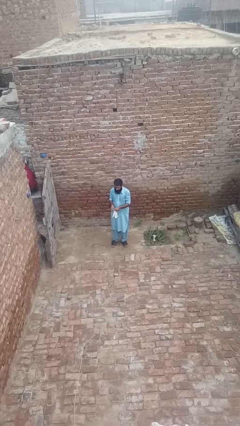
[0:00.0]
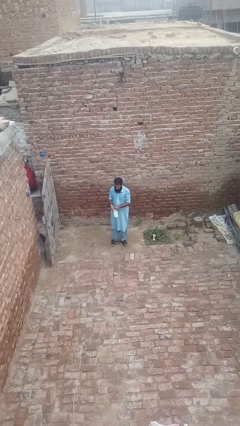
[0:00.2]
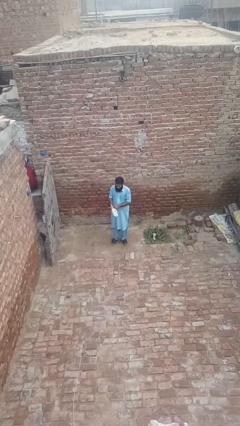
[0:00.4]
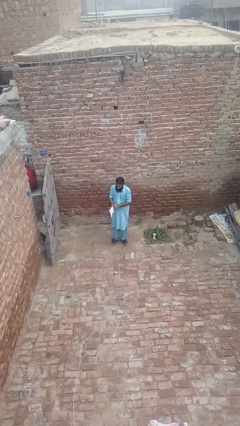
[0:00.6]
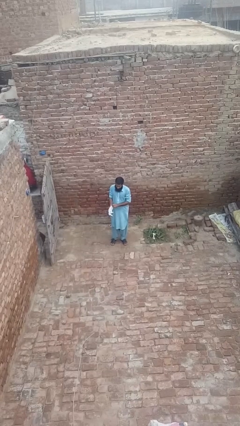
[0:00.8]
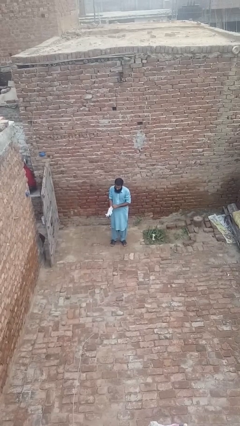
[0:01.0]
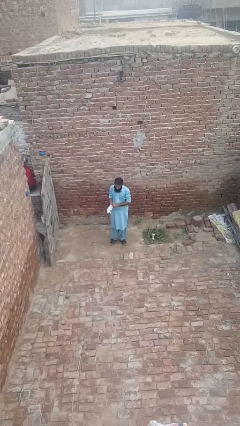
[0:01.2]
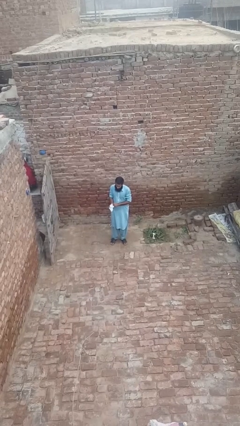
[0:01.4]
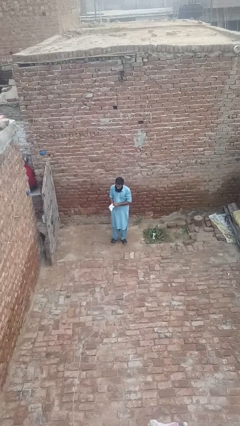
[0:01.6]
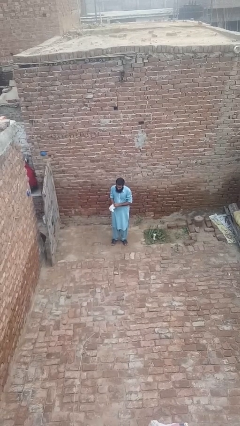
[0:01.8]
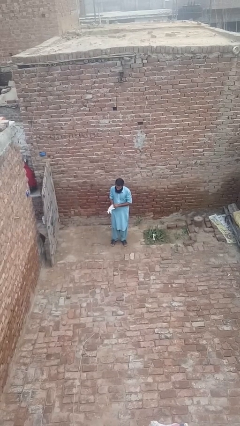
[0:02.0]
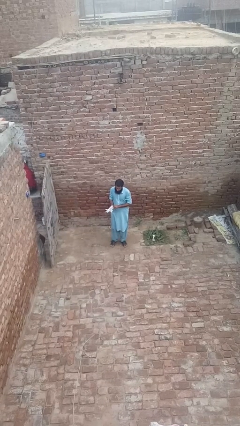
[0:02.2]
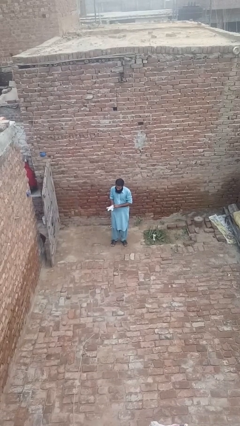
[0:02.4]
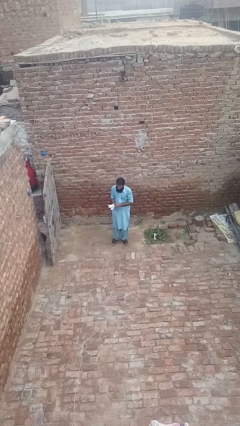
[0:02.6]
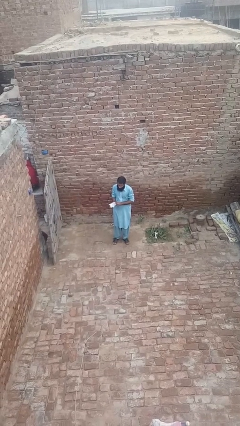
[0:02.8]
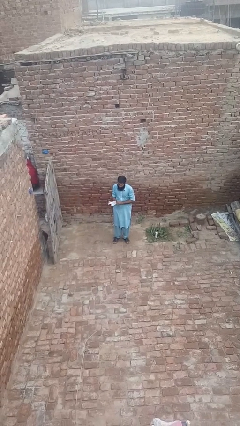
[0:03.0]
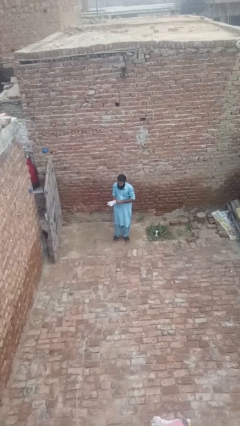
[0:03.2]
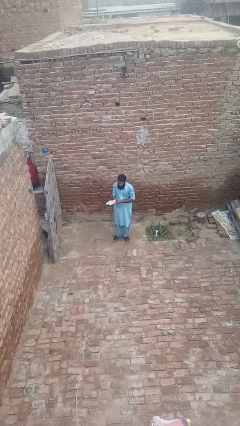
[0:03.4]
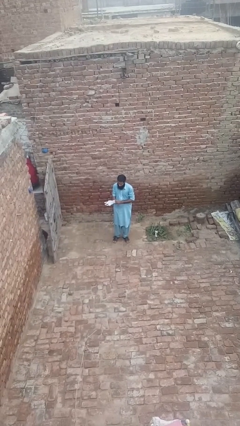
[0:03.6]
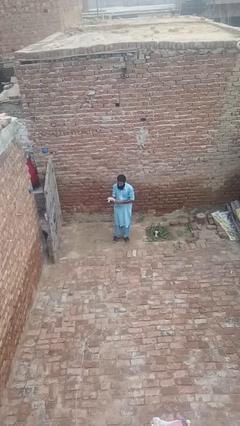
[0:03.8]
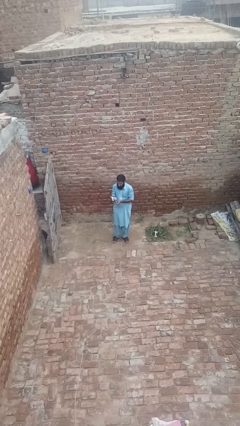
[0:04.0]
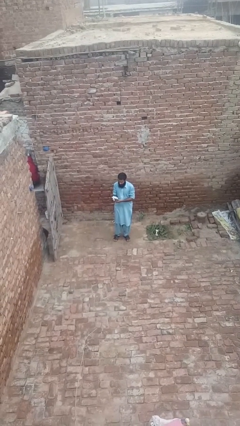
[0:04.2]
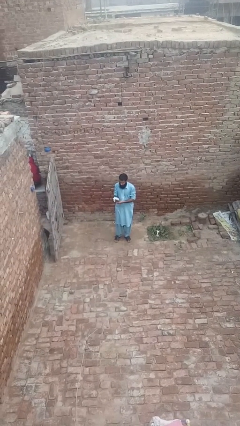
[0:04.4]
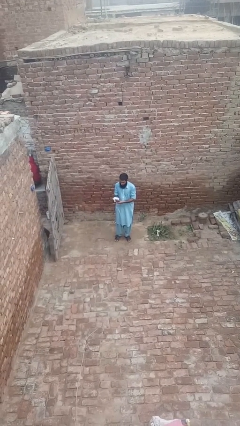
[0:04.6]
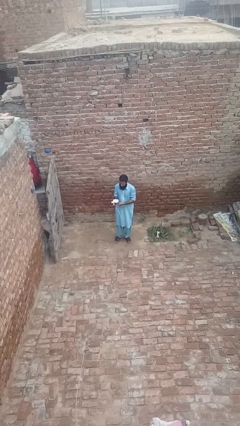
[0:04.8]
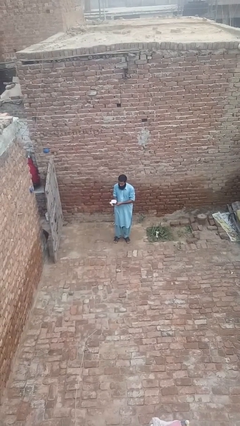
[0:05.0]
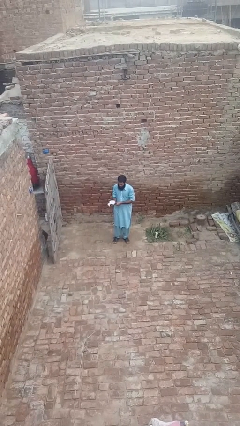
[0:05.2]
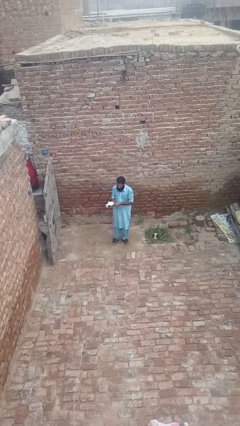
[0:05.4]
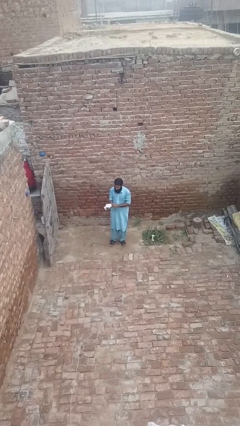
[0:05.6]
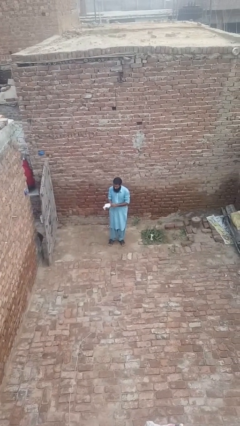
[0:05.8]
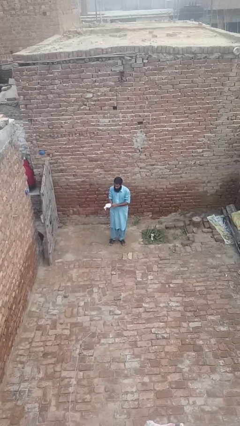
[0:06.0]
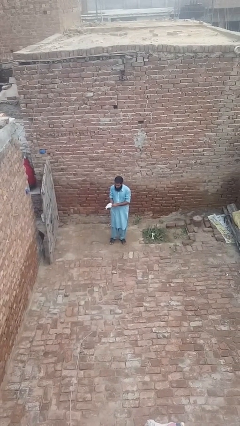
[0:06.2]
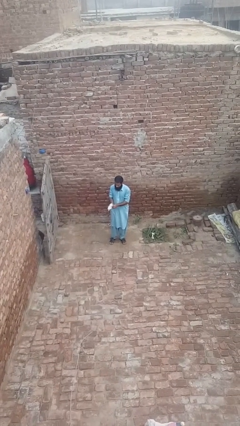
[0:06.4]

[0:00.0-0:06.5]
person puts on gloves

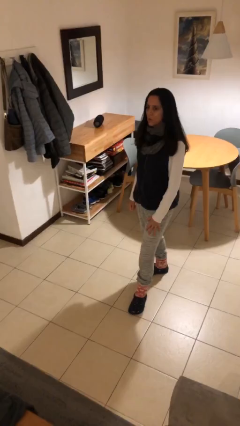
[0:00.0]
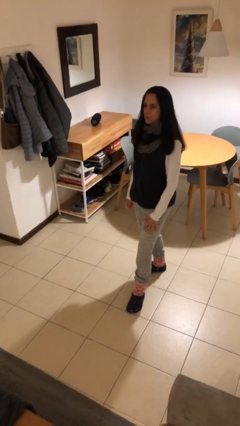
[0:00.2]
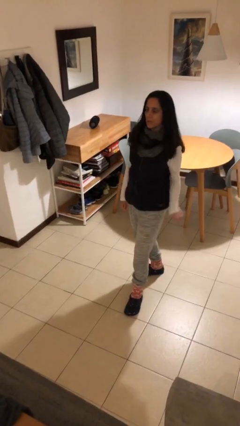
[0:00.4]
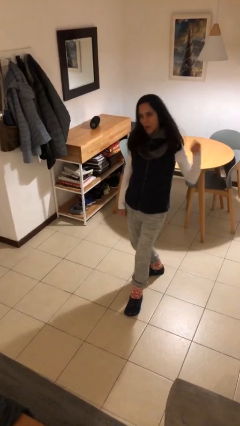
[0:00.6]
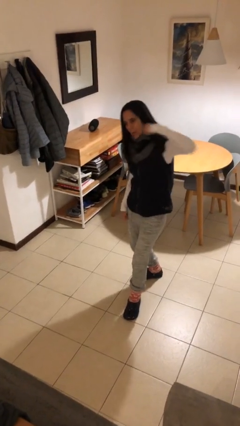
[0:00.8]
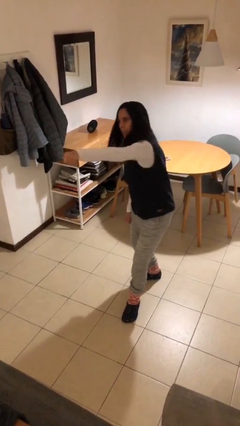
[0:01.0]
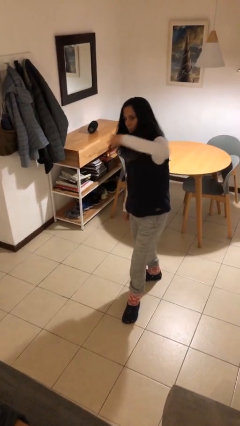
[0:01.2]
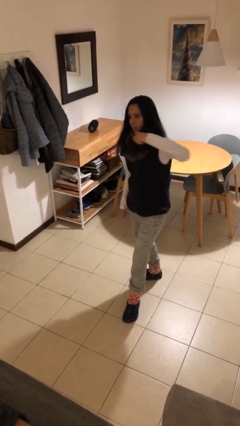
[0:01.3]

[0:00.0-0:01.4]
person punches

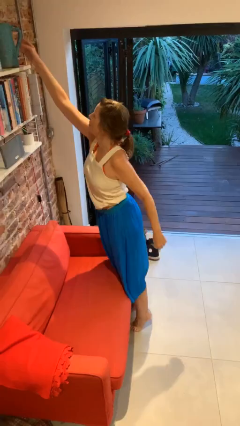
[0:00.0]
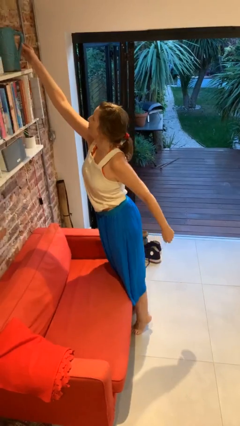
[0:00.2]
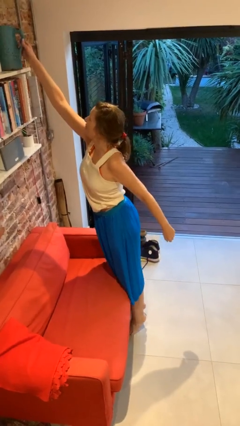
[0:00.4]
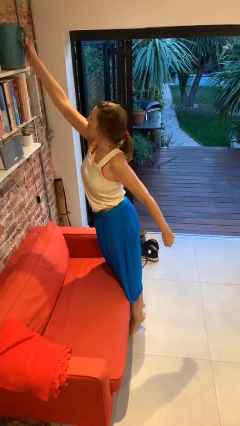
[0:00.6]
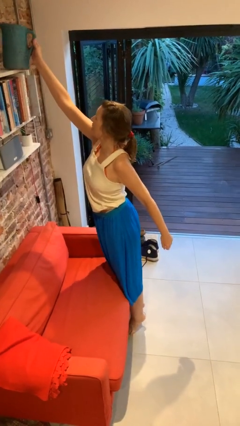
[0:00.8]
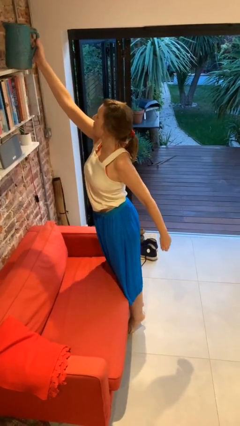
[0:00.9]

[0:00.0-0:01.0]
person picks up object from shelf

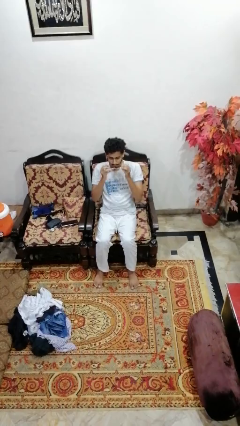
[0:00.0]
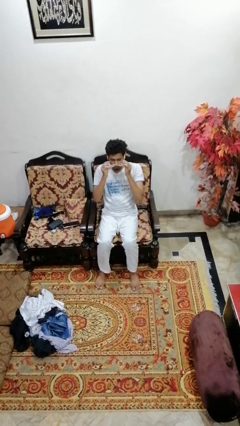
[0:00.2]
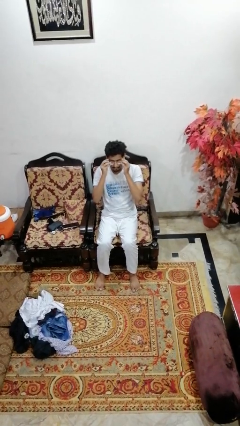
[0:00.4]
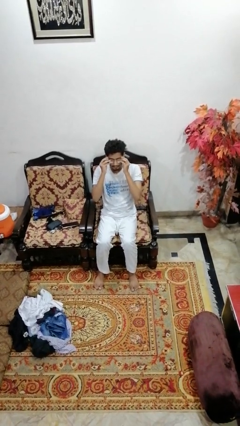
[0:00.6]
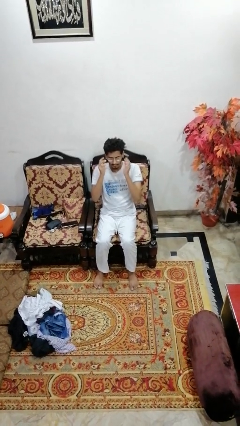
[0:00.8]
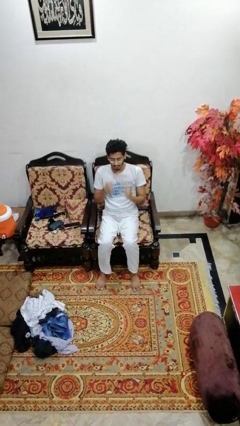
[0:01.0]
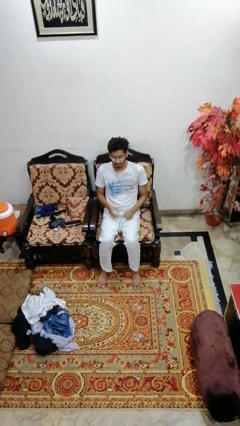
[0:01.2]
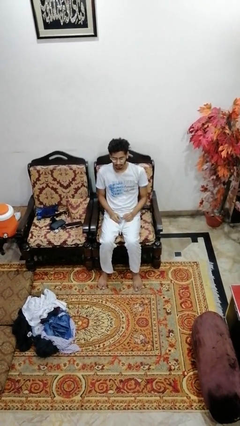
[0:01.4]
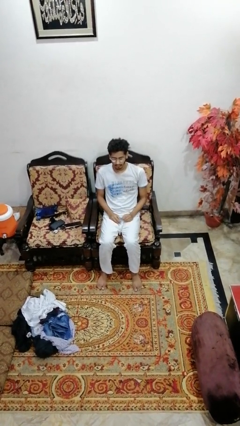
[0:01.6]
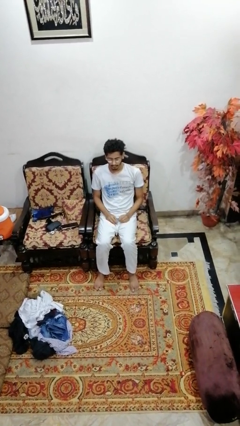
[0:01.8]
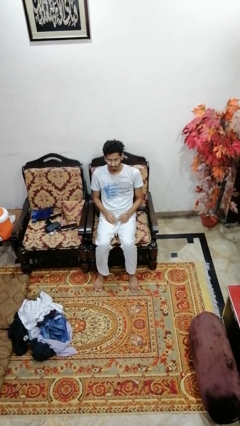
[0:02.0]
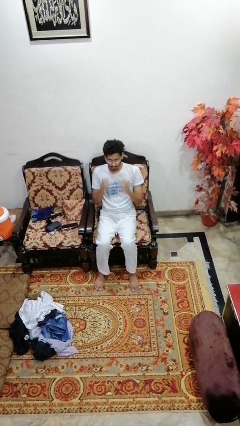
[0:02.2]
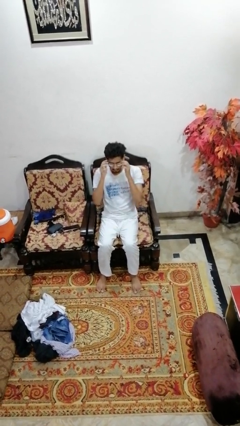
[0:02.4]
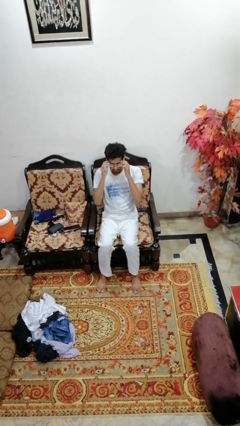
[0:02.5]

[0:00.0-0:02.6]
person puts on glasses

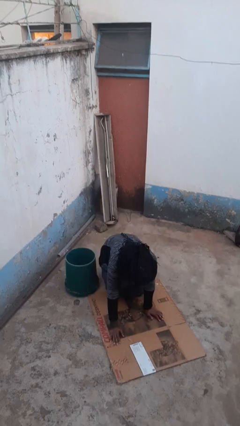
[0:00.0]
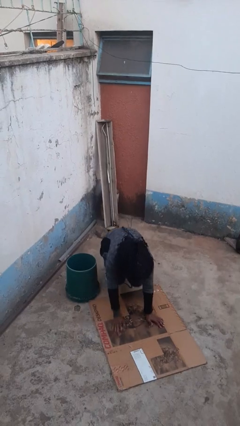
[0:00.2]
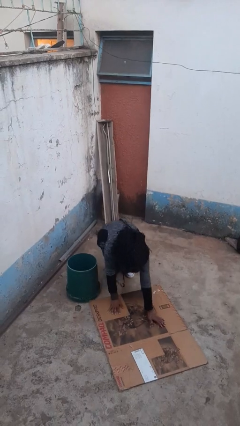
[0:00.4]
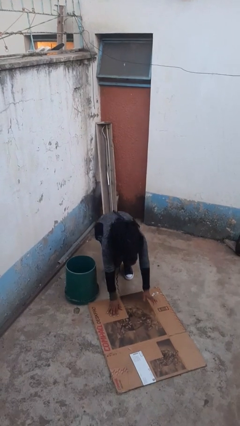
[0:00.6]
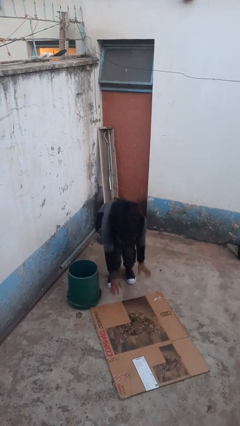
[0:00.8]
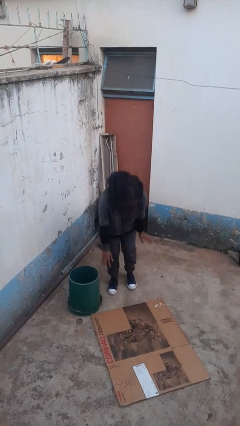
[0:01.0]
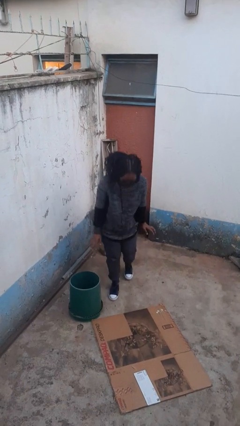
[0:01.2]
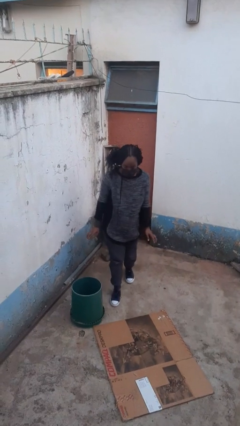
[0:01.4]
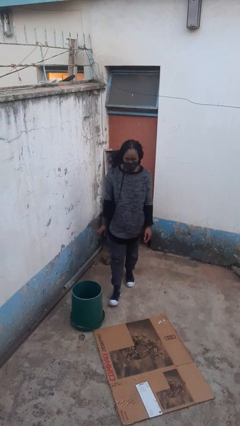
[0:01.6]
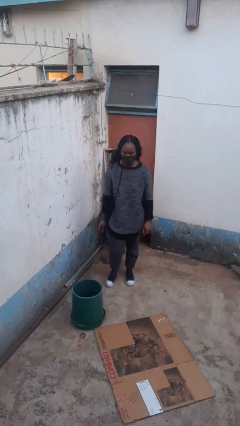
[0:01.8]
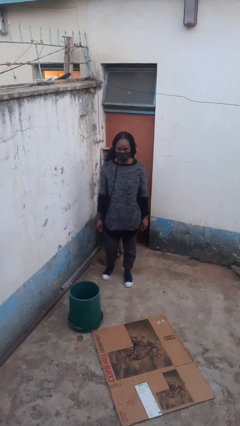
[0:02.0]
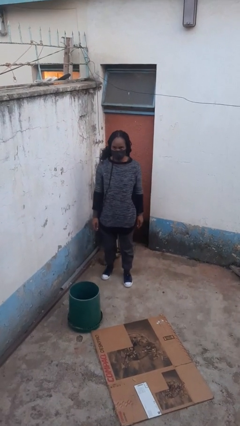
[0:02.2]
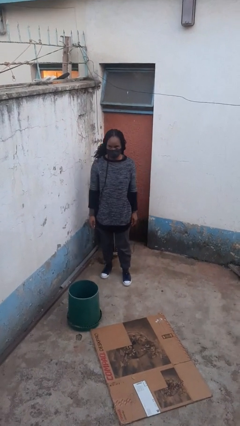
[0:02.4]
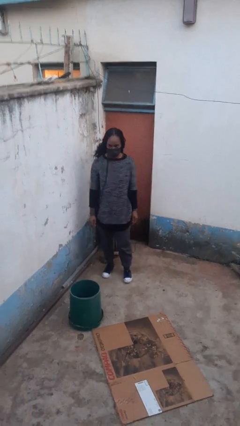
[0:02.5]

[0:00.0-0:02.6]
person stands up from floor

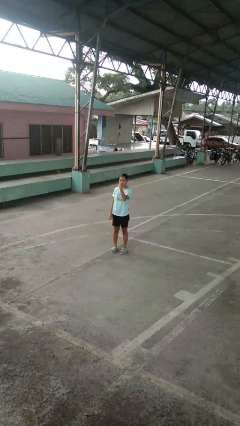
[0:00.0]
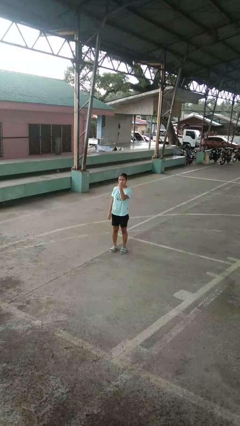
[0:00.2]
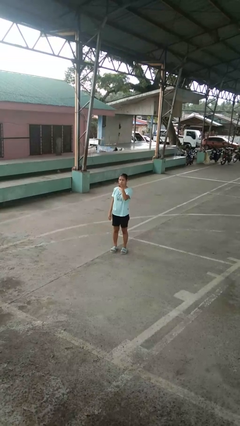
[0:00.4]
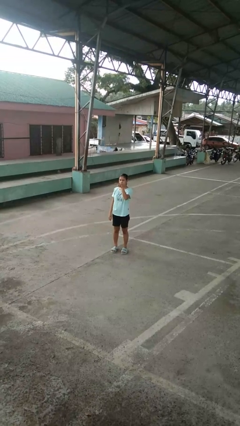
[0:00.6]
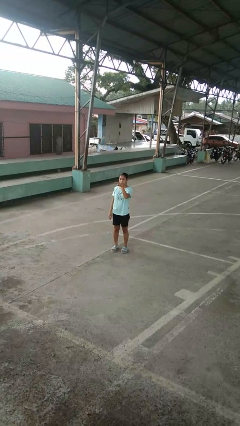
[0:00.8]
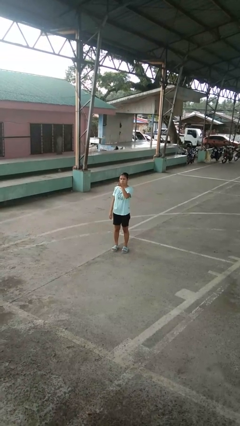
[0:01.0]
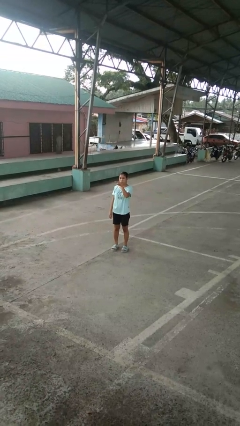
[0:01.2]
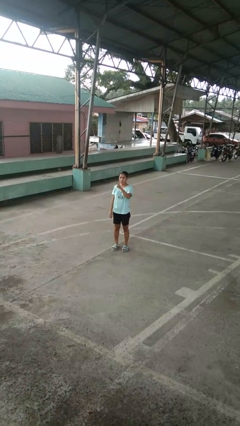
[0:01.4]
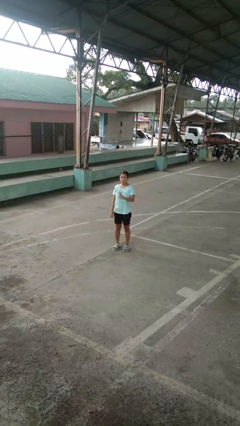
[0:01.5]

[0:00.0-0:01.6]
person gestures watch closely

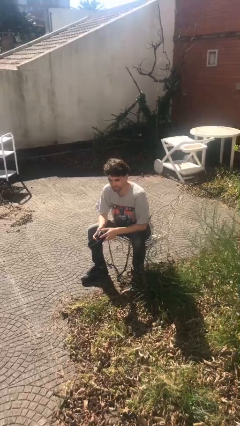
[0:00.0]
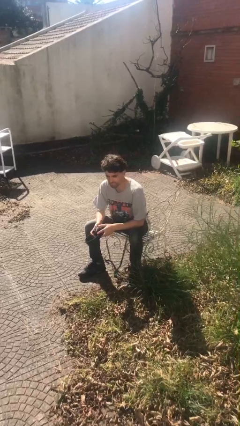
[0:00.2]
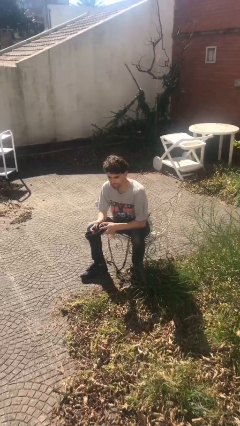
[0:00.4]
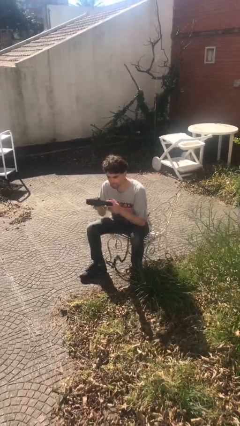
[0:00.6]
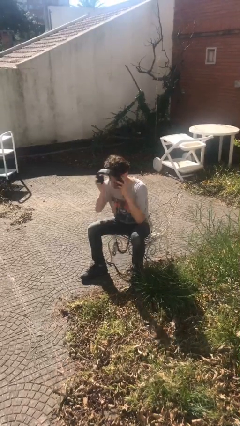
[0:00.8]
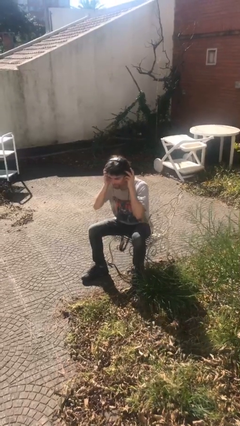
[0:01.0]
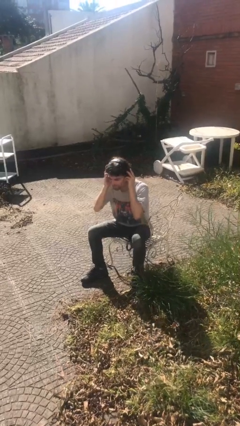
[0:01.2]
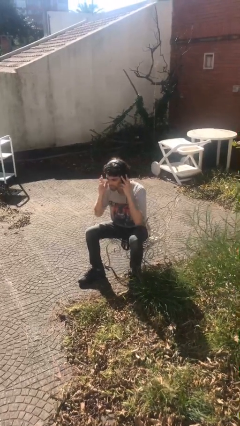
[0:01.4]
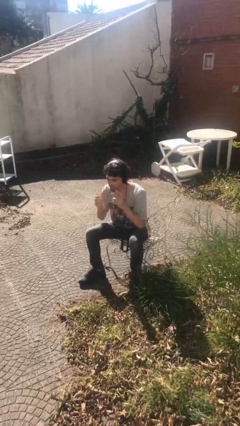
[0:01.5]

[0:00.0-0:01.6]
person puts on headphones
